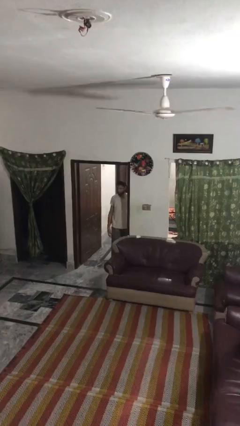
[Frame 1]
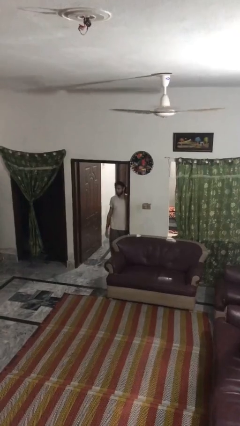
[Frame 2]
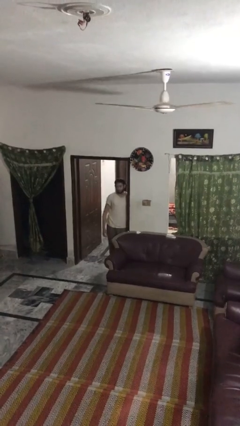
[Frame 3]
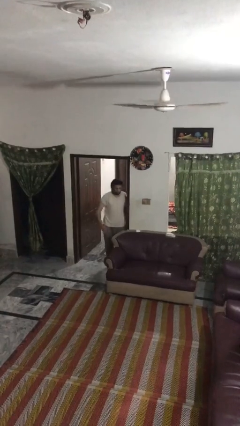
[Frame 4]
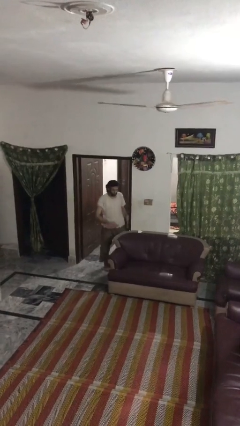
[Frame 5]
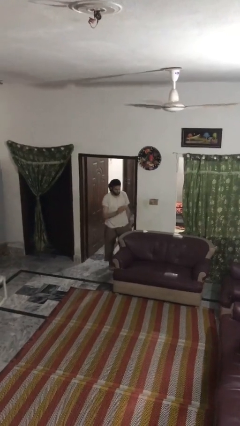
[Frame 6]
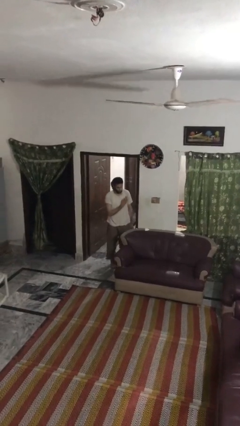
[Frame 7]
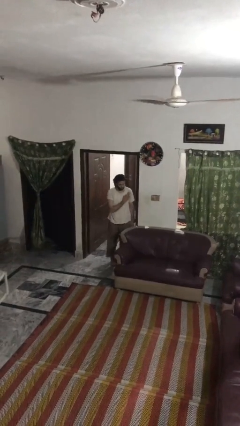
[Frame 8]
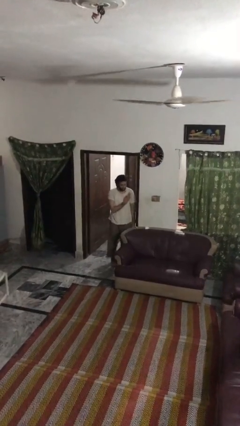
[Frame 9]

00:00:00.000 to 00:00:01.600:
person bumps into wall

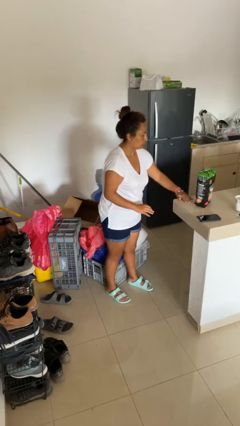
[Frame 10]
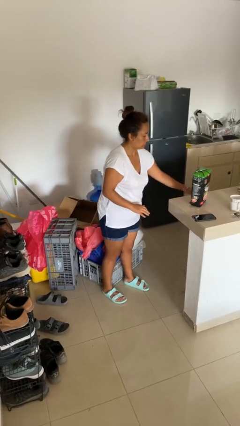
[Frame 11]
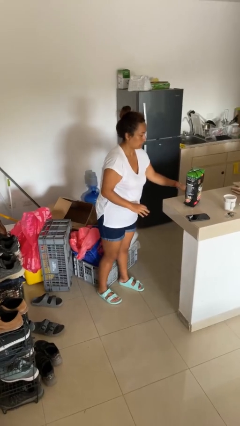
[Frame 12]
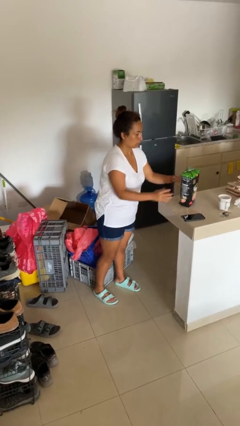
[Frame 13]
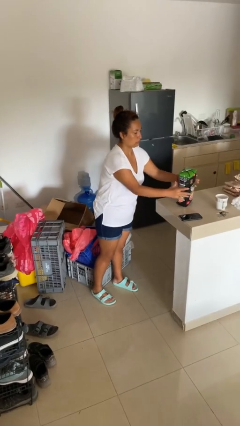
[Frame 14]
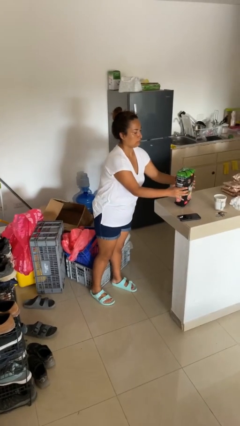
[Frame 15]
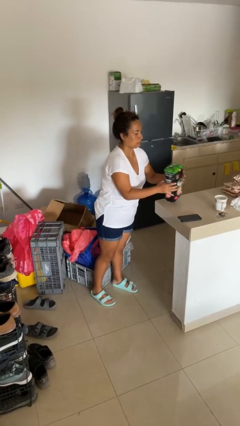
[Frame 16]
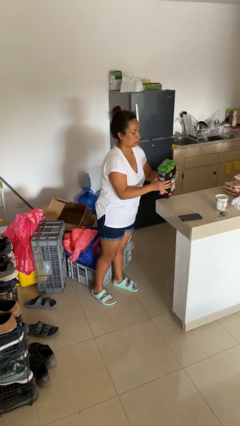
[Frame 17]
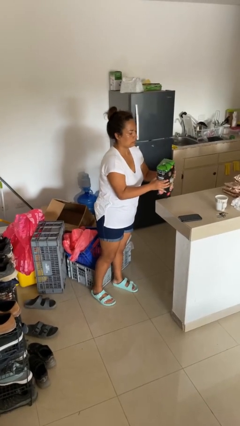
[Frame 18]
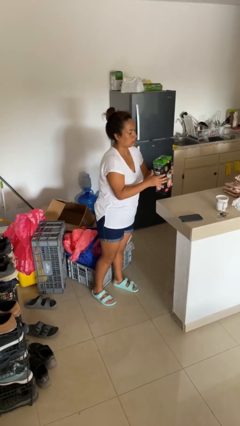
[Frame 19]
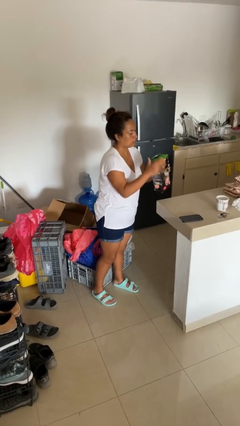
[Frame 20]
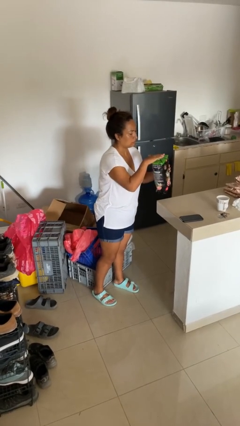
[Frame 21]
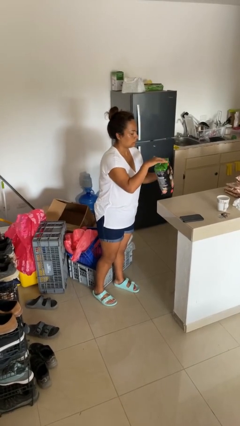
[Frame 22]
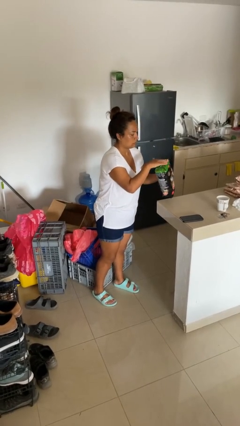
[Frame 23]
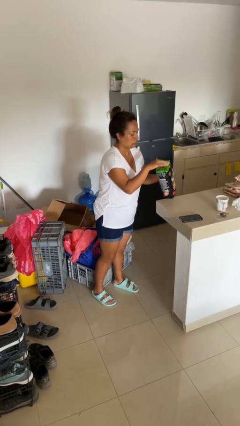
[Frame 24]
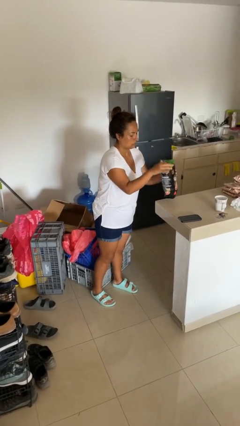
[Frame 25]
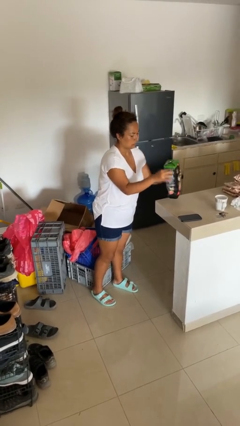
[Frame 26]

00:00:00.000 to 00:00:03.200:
person picks up object from countertop

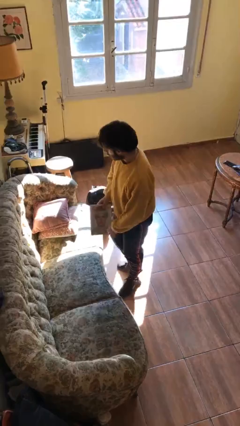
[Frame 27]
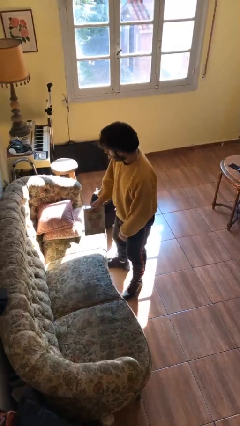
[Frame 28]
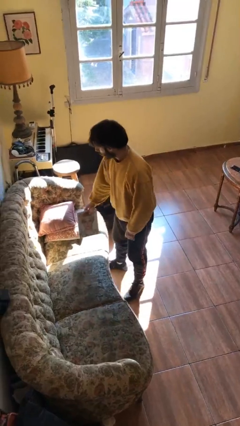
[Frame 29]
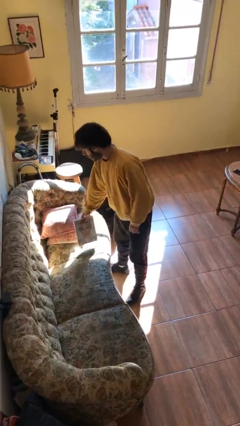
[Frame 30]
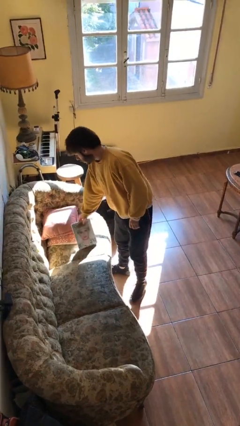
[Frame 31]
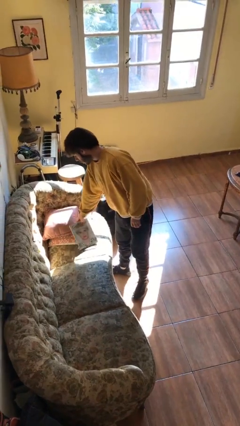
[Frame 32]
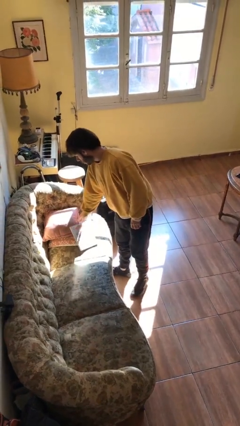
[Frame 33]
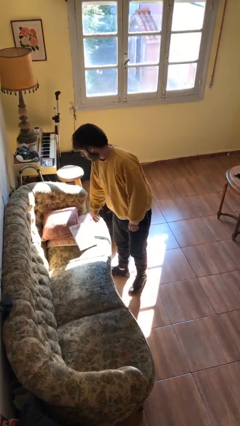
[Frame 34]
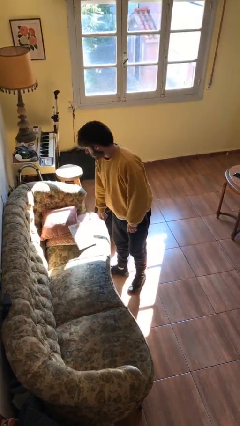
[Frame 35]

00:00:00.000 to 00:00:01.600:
person puts down object on couch

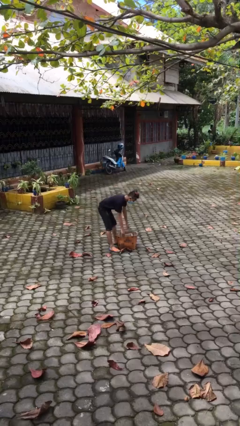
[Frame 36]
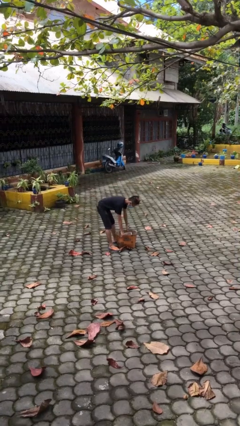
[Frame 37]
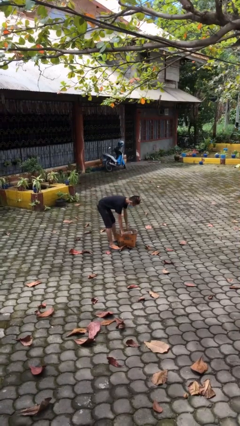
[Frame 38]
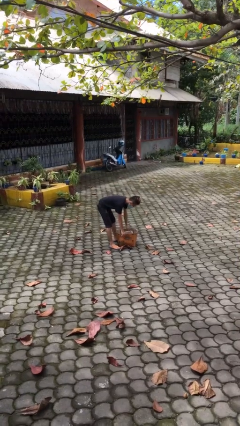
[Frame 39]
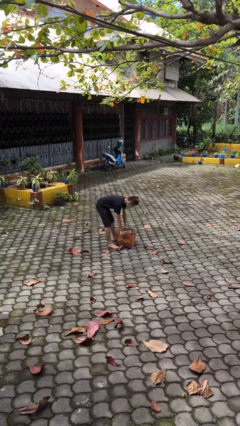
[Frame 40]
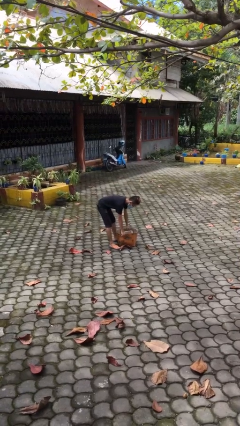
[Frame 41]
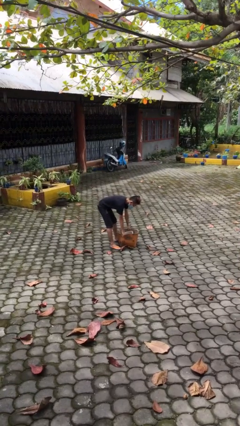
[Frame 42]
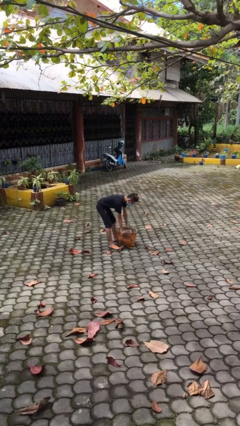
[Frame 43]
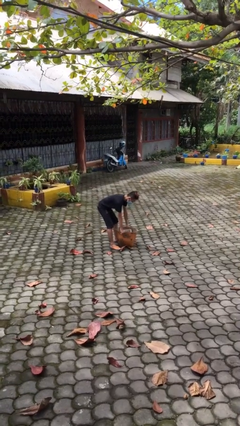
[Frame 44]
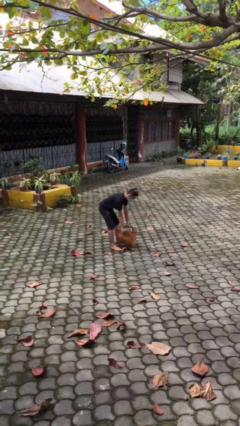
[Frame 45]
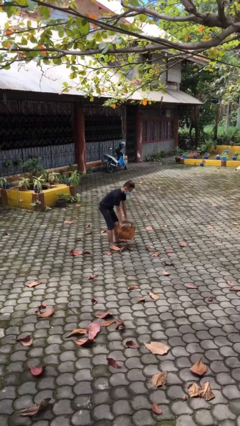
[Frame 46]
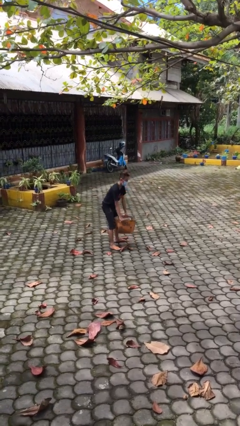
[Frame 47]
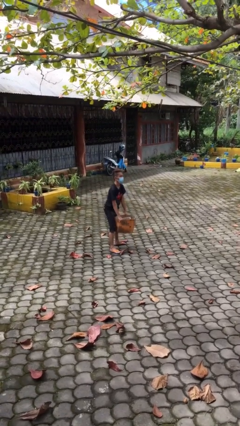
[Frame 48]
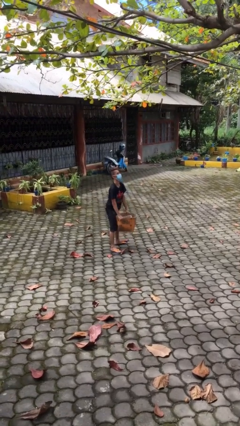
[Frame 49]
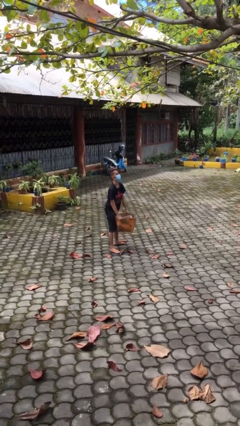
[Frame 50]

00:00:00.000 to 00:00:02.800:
person picks up object from floor

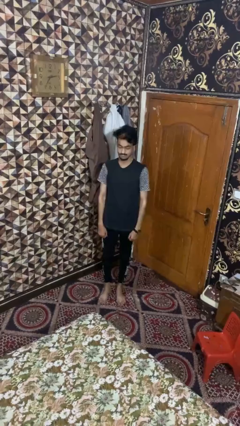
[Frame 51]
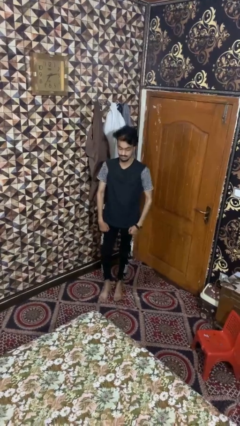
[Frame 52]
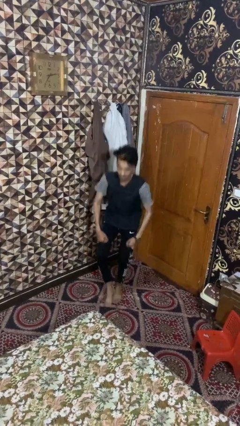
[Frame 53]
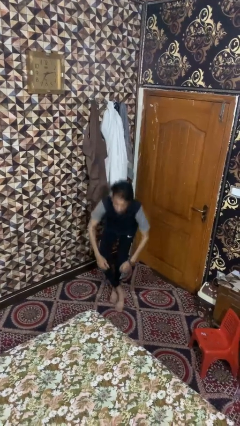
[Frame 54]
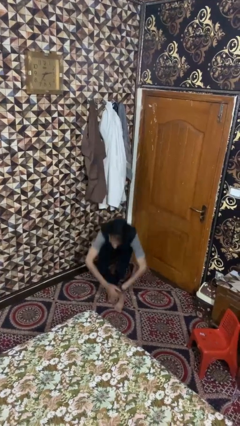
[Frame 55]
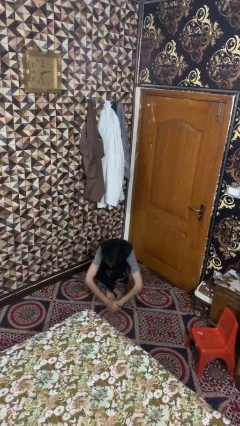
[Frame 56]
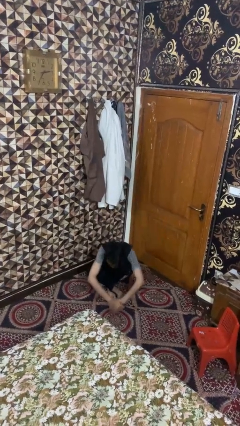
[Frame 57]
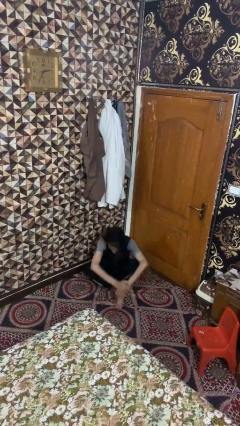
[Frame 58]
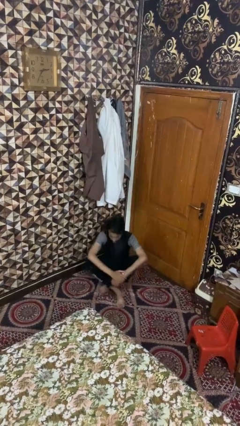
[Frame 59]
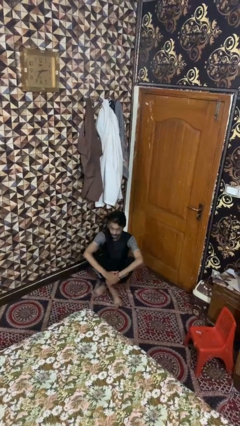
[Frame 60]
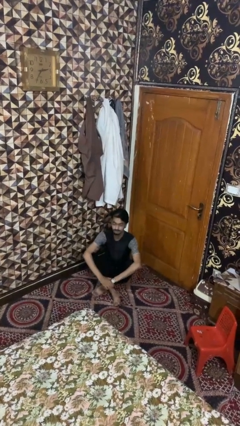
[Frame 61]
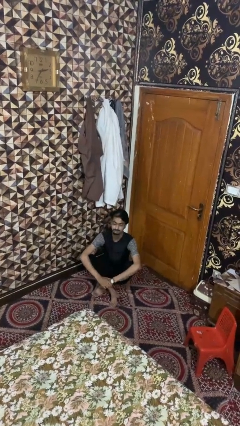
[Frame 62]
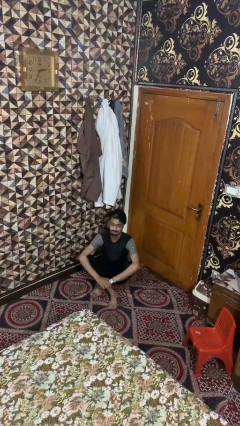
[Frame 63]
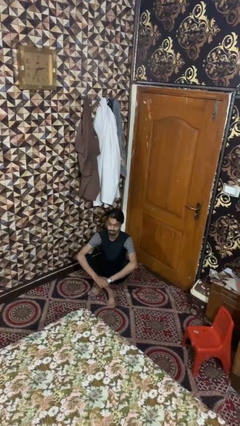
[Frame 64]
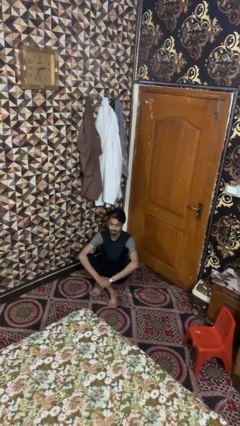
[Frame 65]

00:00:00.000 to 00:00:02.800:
person sits crisscross

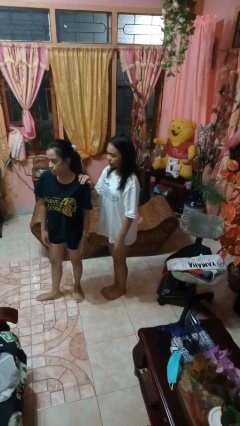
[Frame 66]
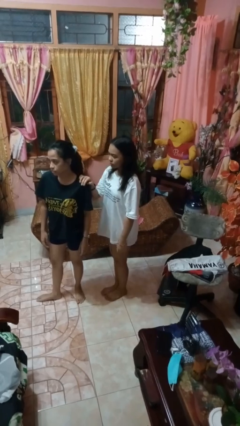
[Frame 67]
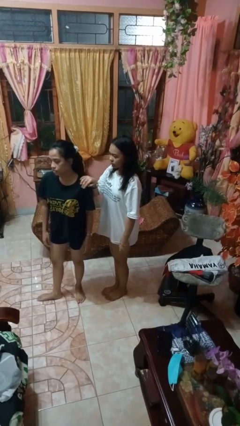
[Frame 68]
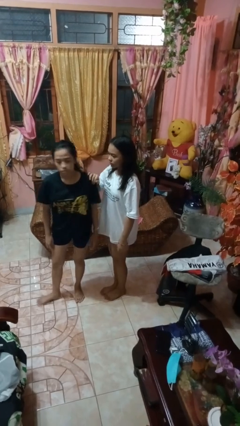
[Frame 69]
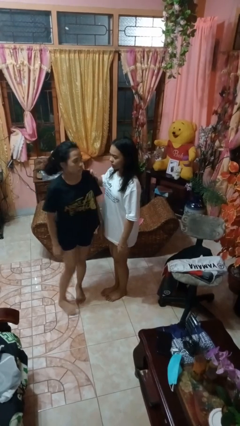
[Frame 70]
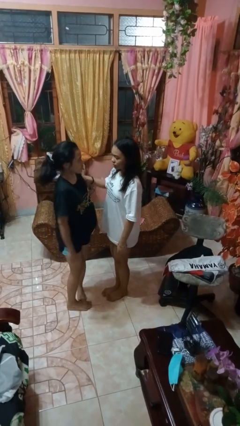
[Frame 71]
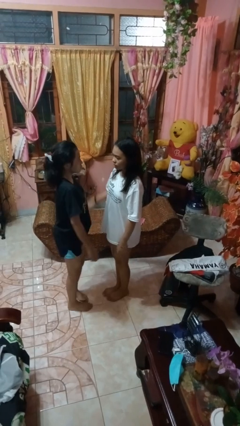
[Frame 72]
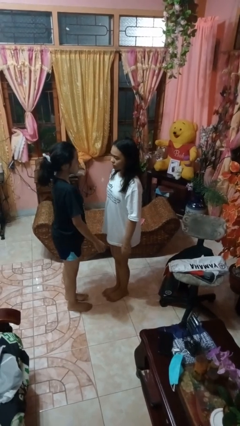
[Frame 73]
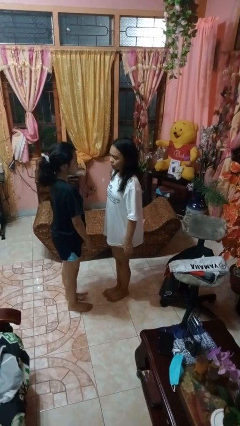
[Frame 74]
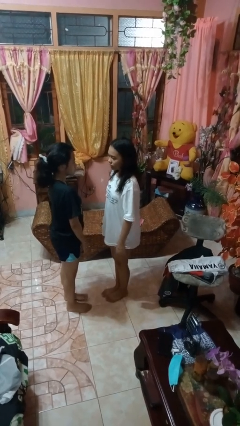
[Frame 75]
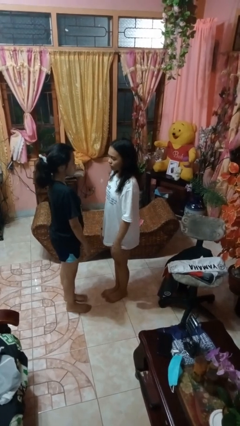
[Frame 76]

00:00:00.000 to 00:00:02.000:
person spins person around

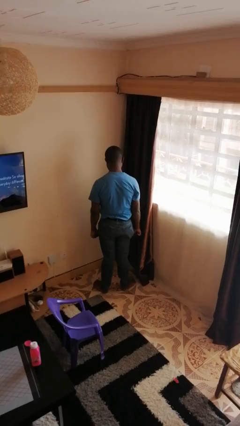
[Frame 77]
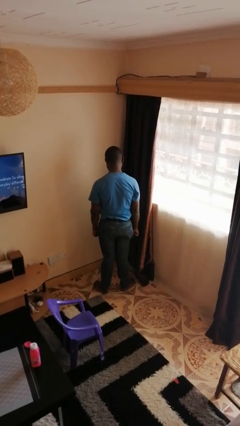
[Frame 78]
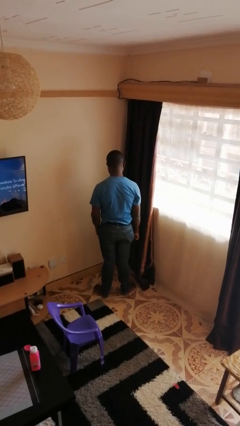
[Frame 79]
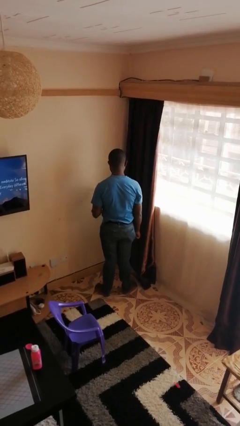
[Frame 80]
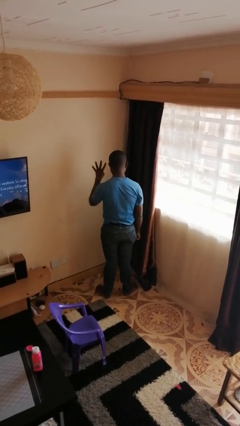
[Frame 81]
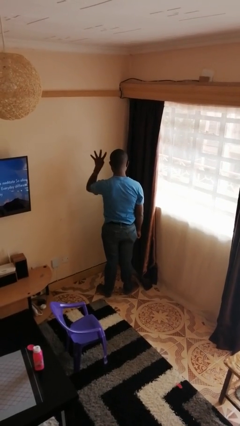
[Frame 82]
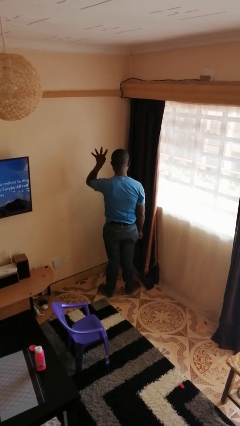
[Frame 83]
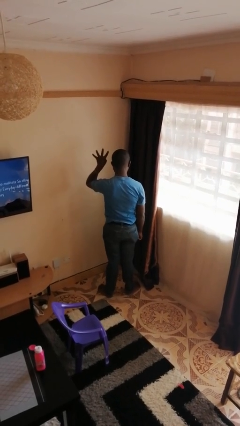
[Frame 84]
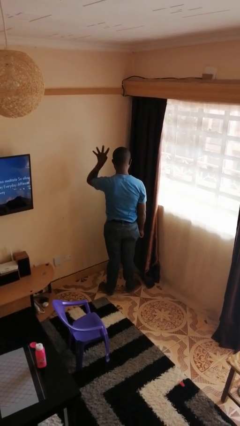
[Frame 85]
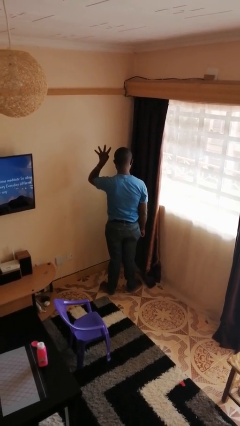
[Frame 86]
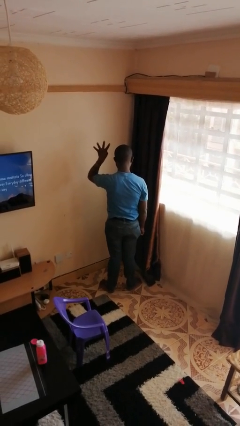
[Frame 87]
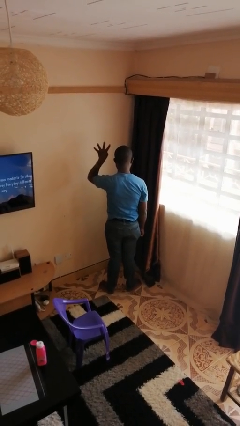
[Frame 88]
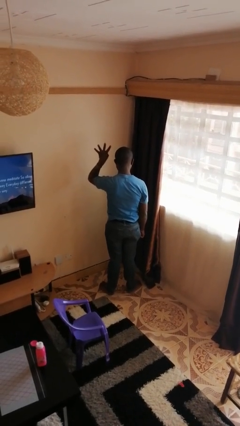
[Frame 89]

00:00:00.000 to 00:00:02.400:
person gestures number four
